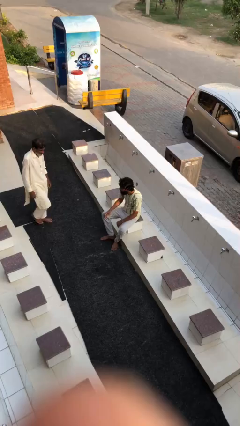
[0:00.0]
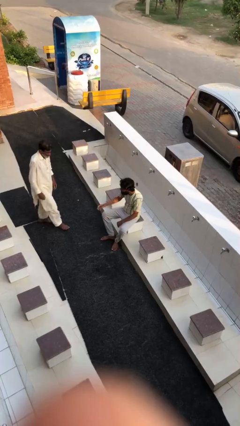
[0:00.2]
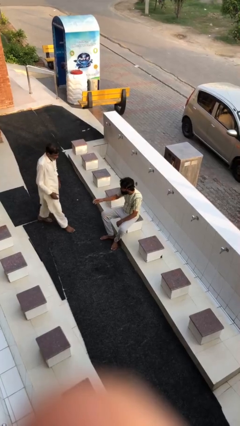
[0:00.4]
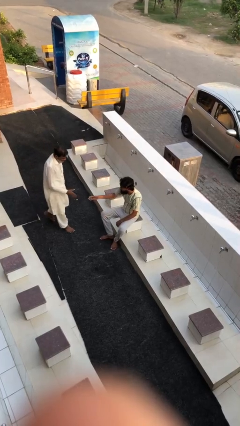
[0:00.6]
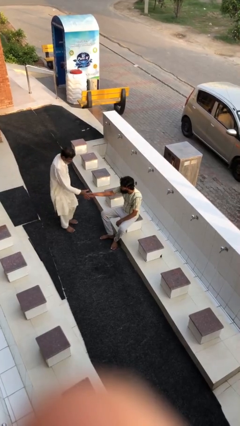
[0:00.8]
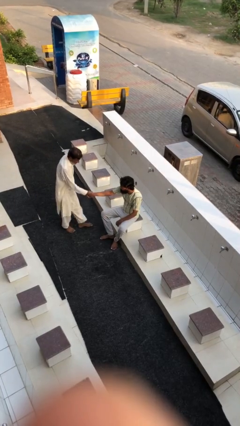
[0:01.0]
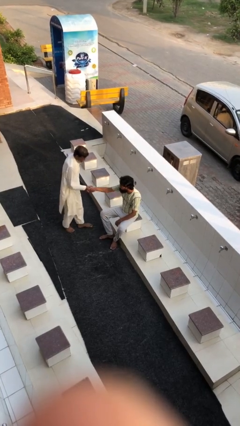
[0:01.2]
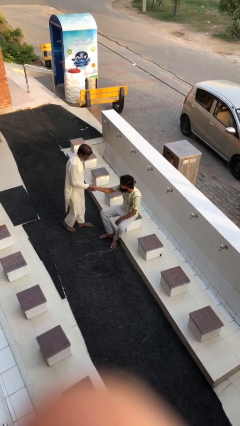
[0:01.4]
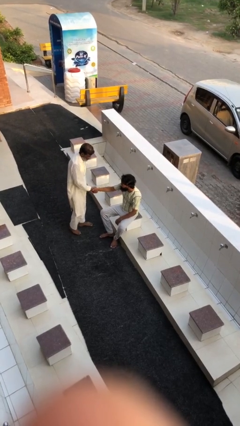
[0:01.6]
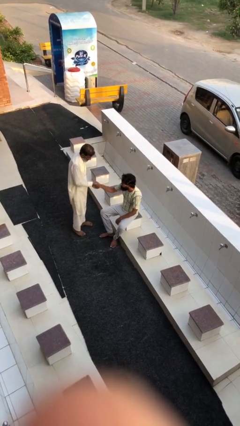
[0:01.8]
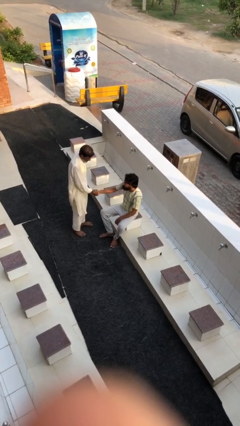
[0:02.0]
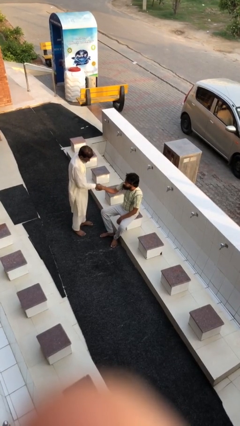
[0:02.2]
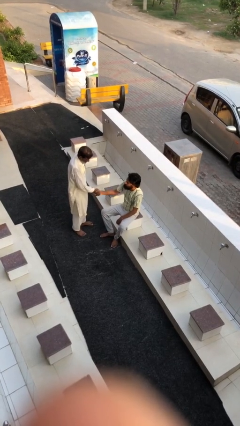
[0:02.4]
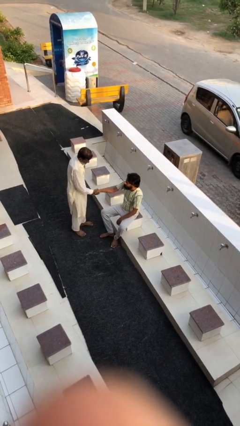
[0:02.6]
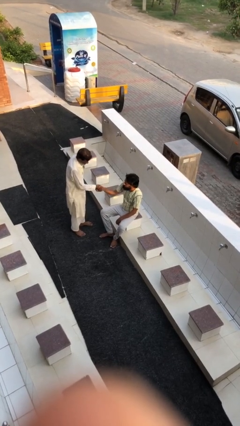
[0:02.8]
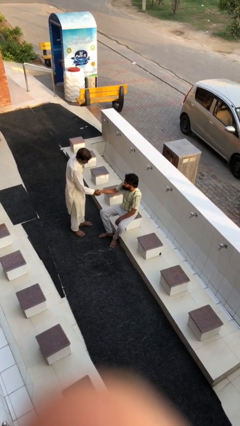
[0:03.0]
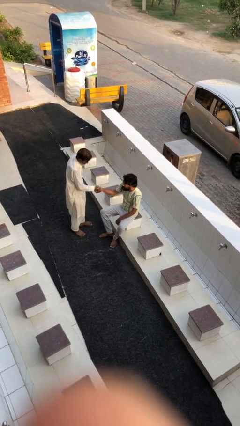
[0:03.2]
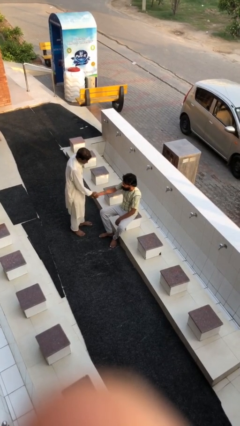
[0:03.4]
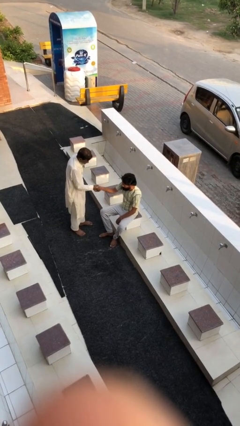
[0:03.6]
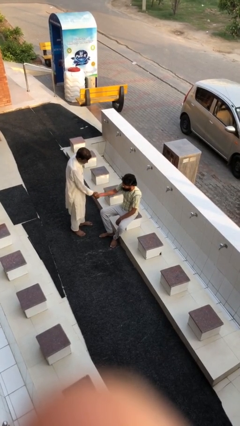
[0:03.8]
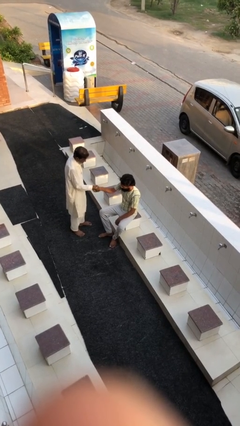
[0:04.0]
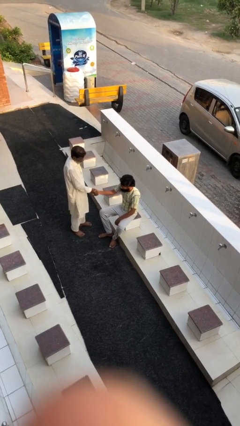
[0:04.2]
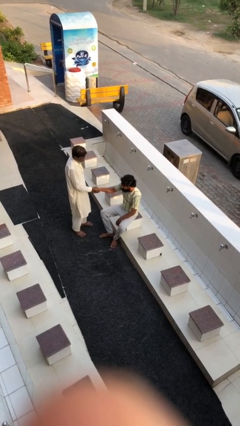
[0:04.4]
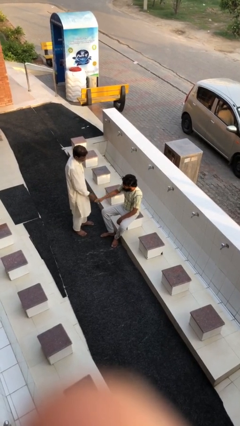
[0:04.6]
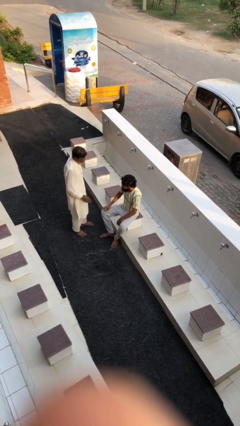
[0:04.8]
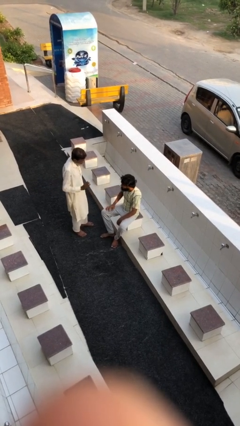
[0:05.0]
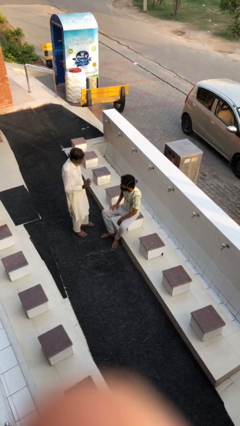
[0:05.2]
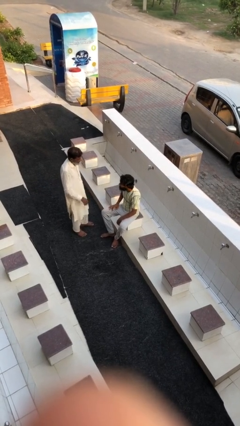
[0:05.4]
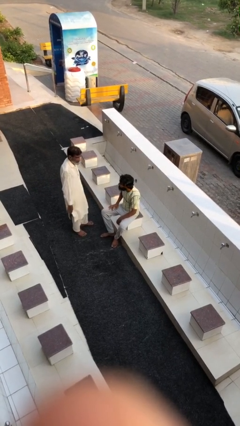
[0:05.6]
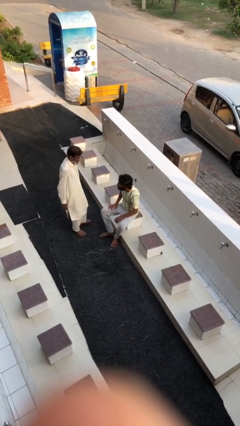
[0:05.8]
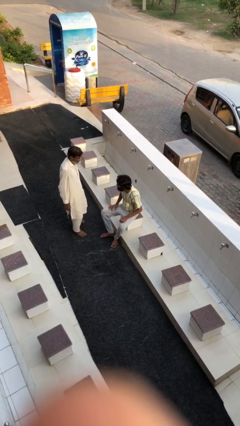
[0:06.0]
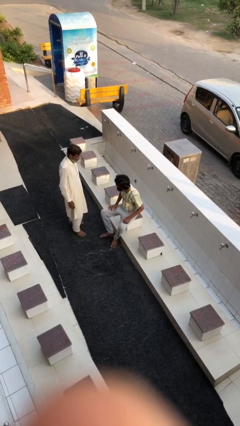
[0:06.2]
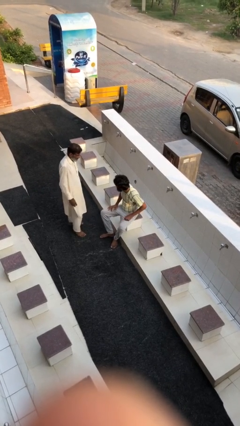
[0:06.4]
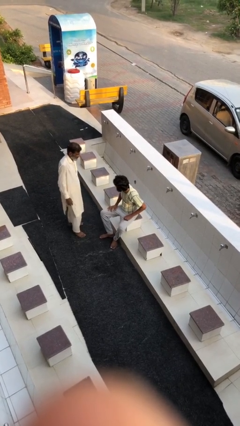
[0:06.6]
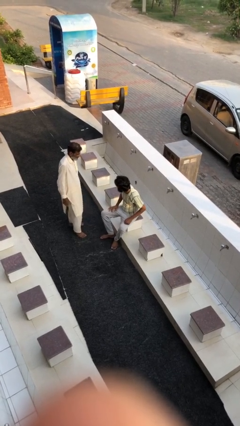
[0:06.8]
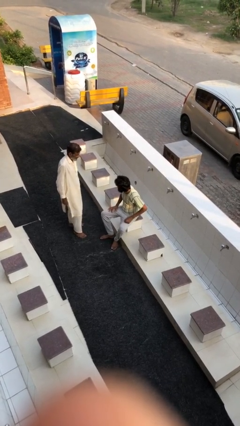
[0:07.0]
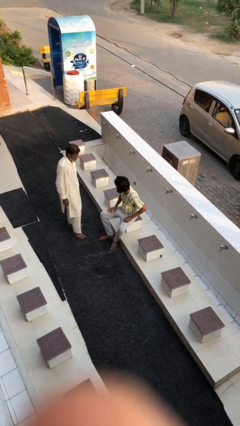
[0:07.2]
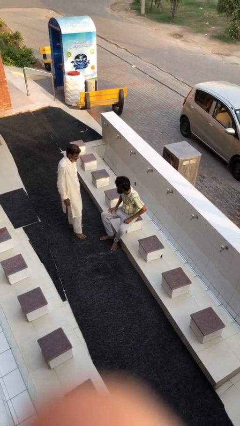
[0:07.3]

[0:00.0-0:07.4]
person shakes hand

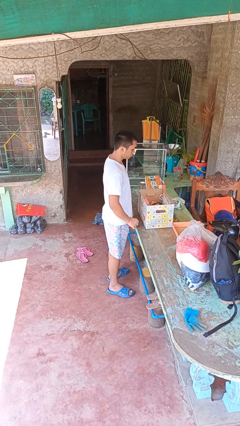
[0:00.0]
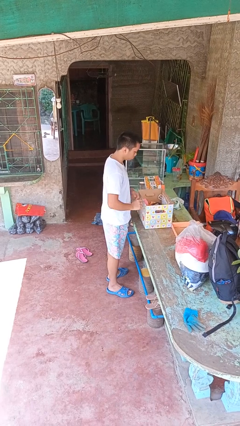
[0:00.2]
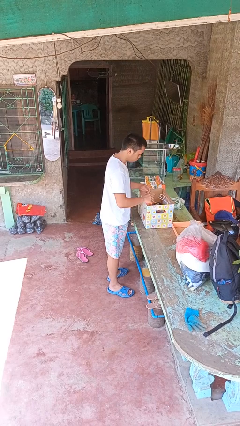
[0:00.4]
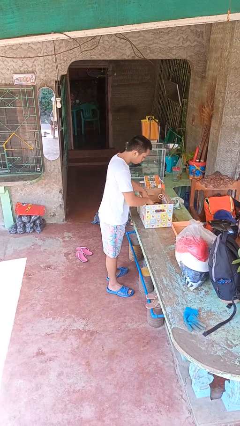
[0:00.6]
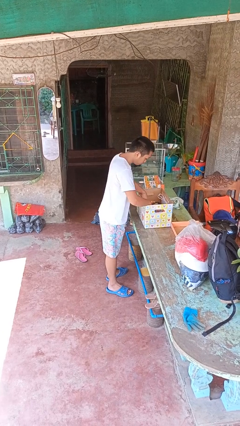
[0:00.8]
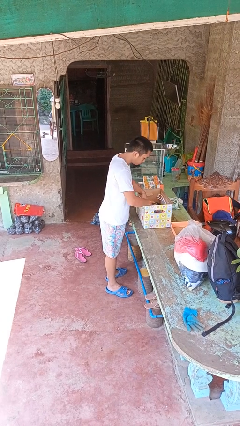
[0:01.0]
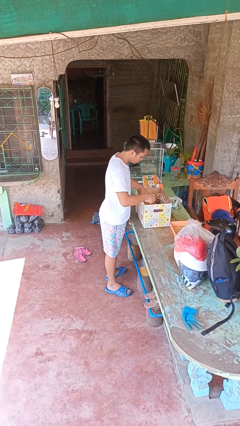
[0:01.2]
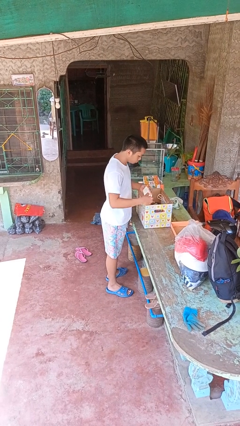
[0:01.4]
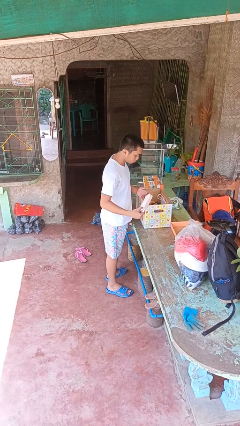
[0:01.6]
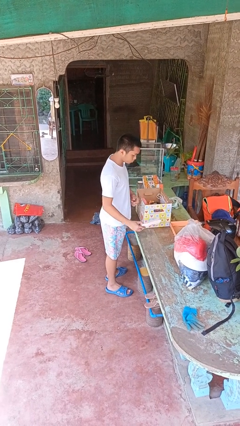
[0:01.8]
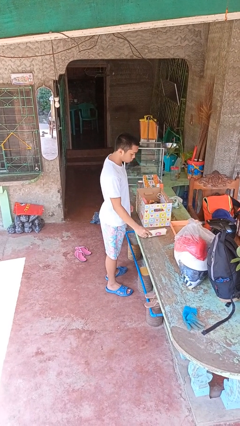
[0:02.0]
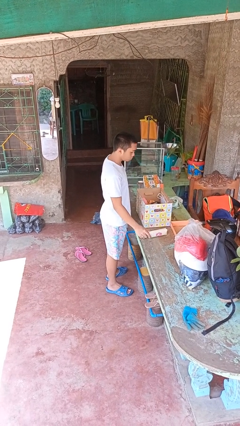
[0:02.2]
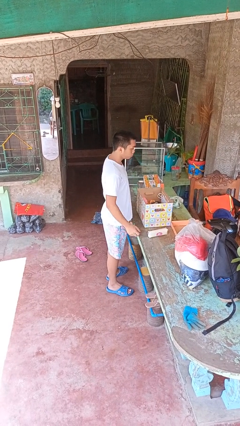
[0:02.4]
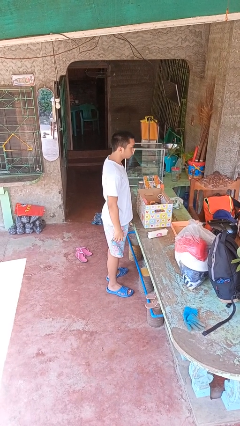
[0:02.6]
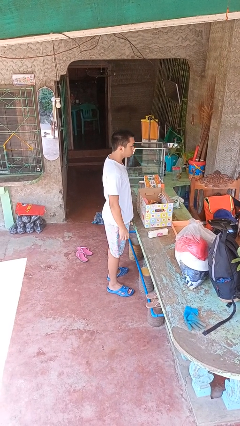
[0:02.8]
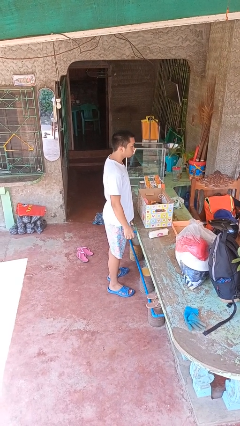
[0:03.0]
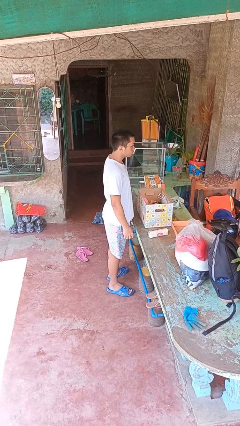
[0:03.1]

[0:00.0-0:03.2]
person takes object from box

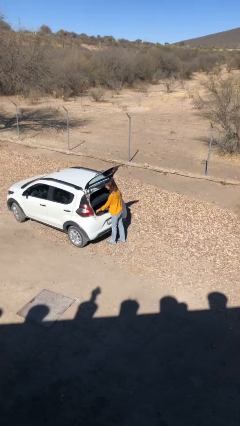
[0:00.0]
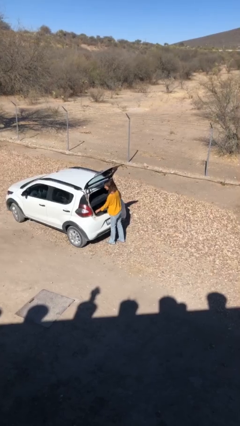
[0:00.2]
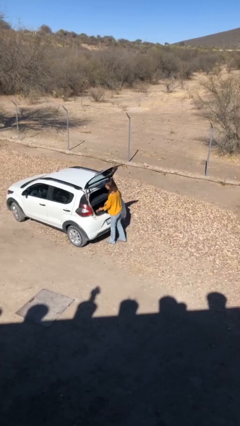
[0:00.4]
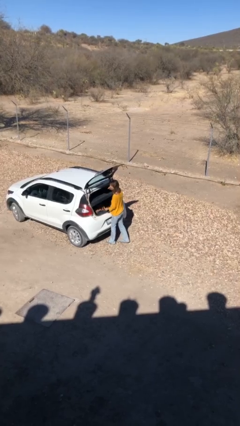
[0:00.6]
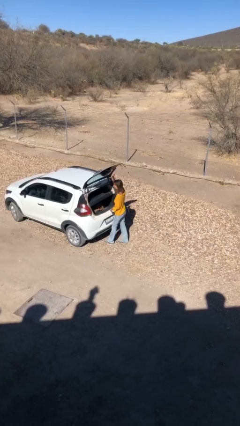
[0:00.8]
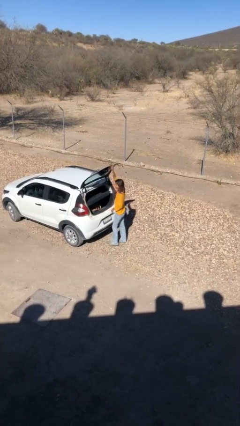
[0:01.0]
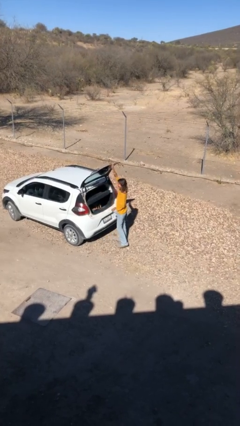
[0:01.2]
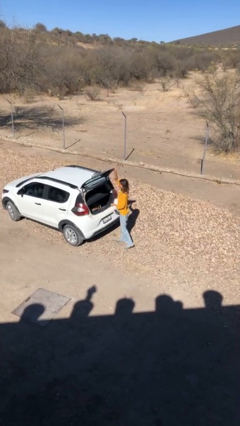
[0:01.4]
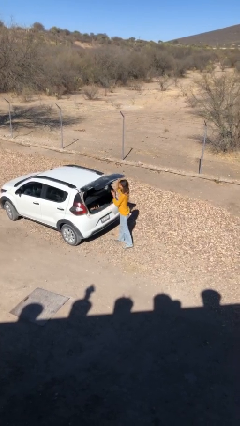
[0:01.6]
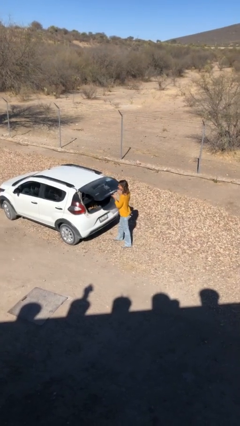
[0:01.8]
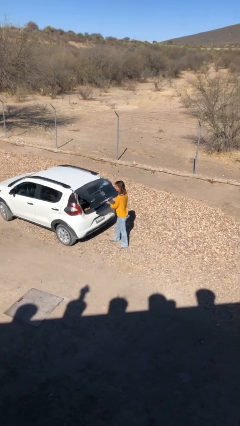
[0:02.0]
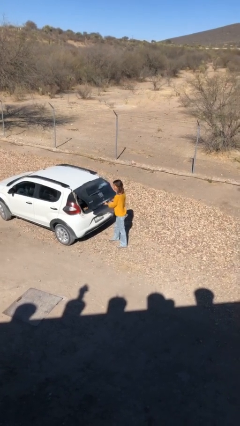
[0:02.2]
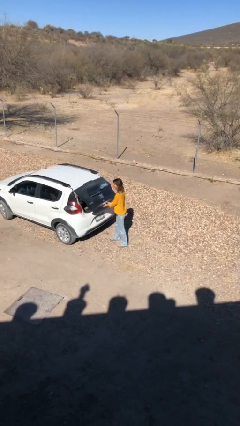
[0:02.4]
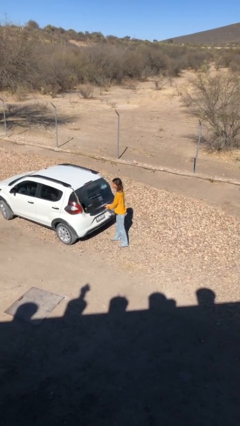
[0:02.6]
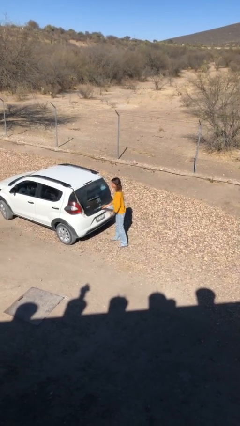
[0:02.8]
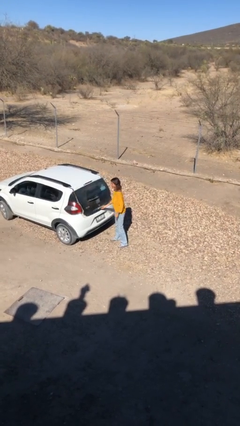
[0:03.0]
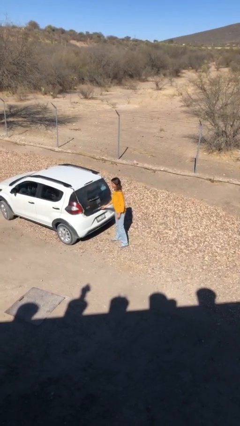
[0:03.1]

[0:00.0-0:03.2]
person closes car trunk

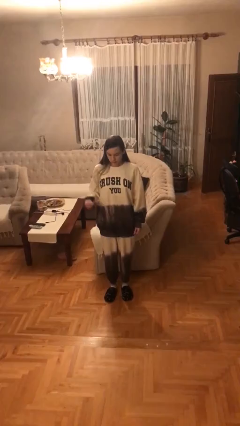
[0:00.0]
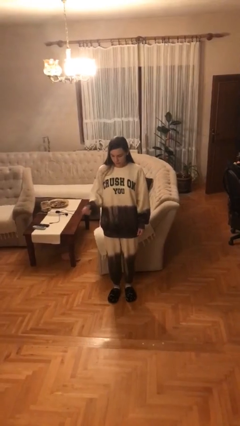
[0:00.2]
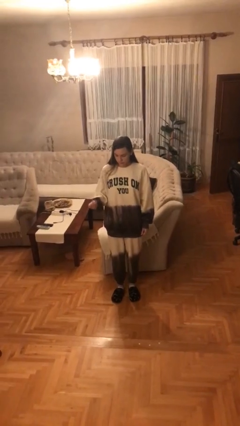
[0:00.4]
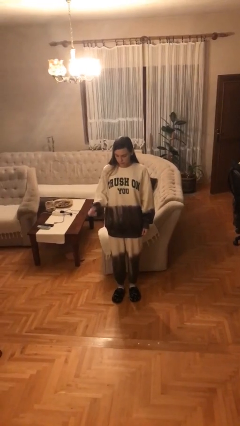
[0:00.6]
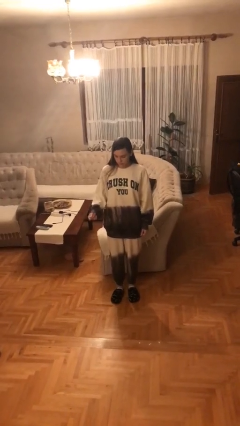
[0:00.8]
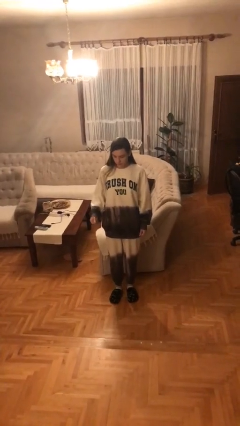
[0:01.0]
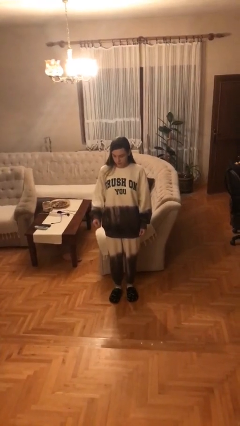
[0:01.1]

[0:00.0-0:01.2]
person snaps fingers

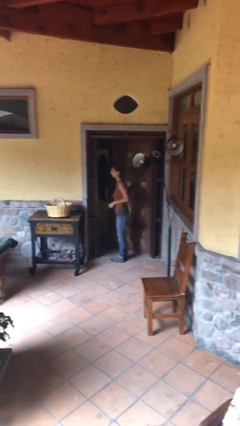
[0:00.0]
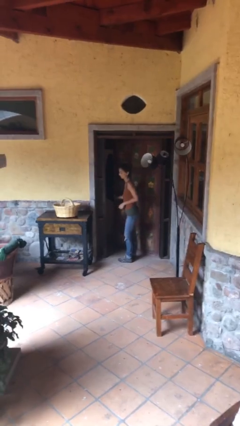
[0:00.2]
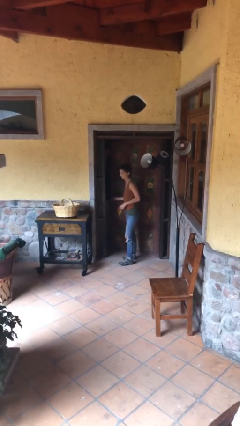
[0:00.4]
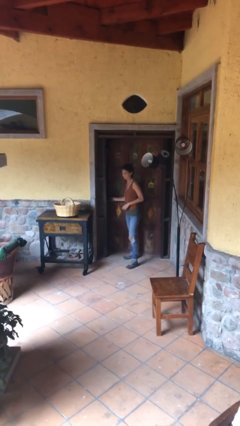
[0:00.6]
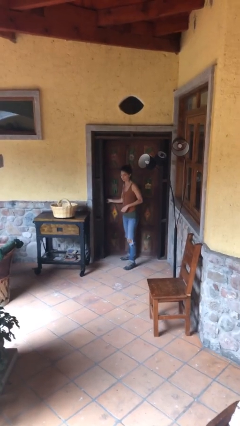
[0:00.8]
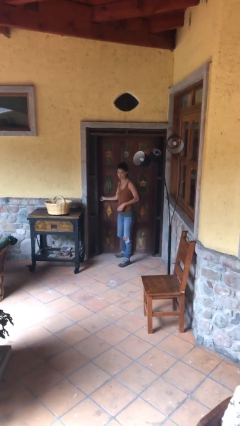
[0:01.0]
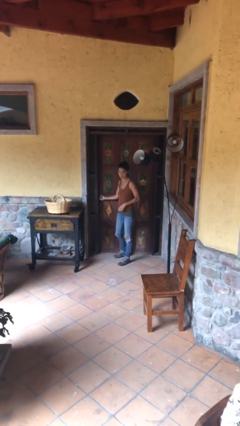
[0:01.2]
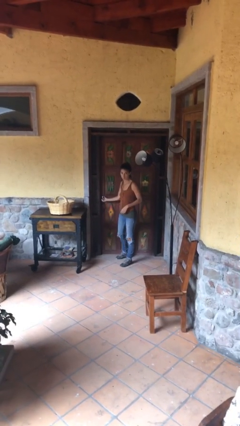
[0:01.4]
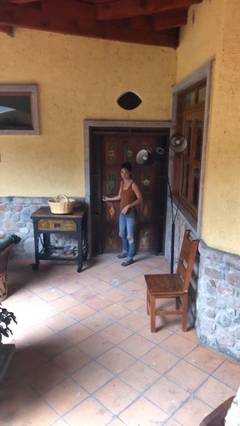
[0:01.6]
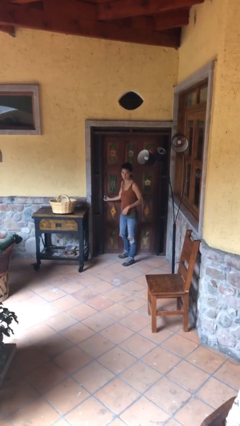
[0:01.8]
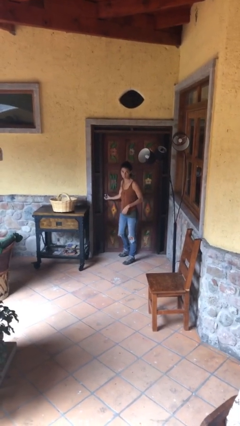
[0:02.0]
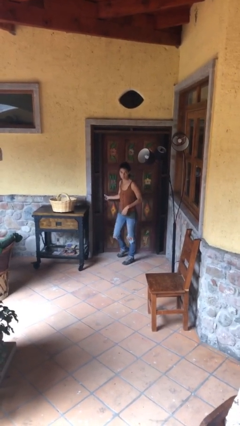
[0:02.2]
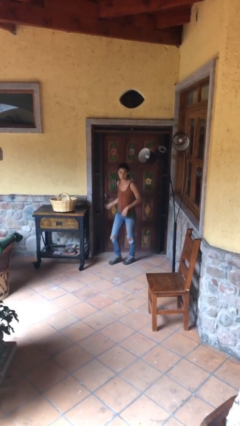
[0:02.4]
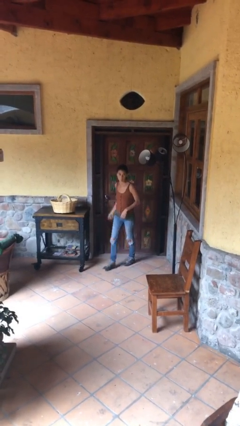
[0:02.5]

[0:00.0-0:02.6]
person closes facility door
